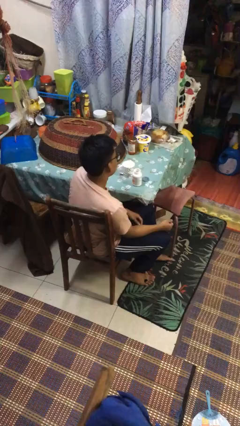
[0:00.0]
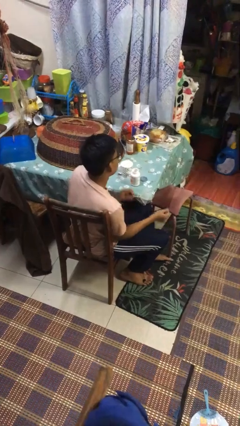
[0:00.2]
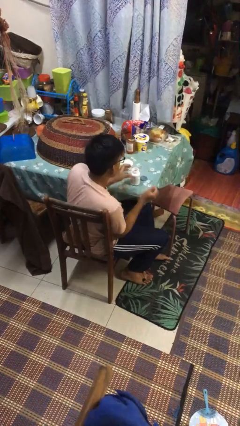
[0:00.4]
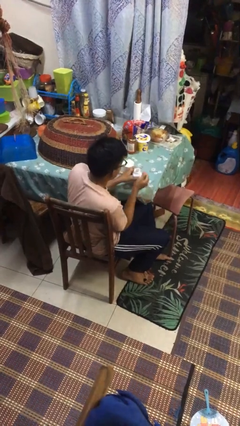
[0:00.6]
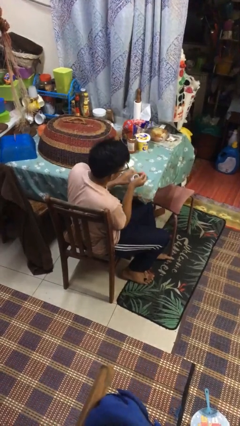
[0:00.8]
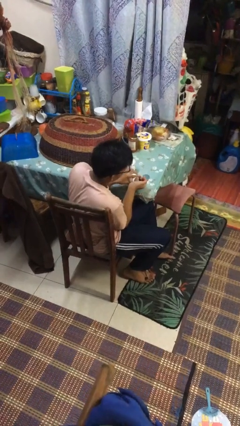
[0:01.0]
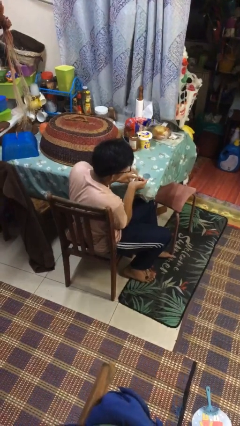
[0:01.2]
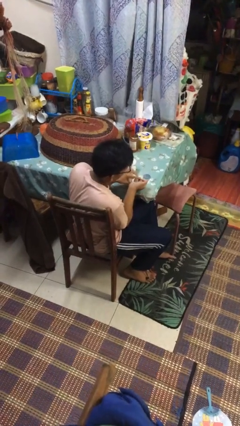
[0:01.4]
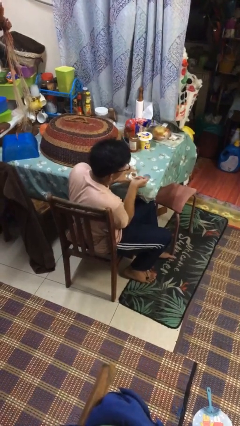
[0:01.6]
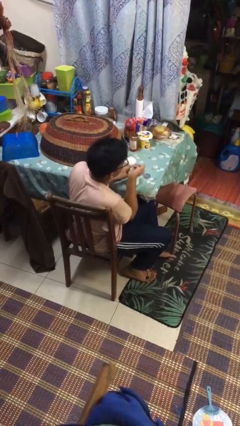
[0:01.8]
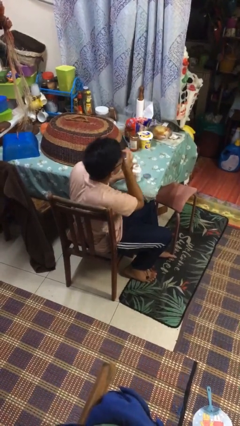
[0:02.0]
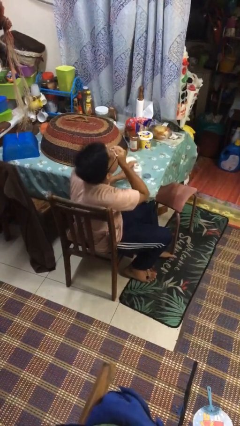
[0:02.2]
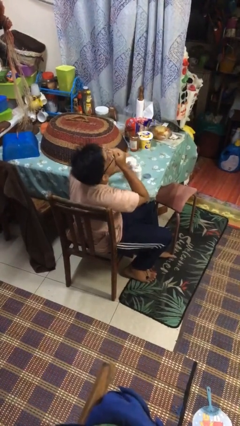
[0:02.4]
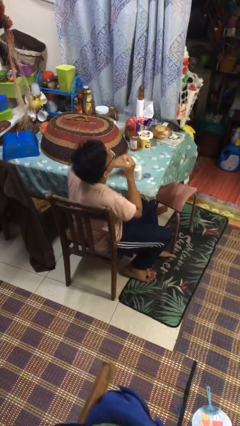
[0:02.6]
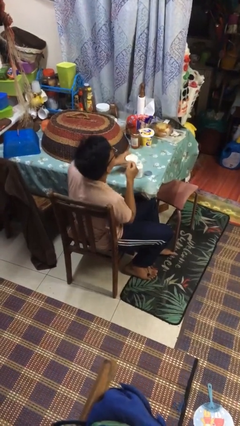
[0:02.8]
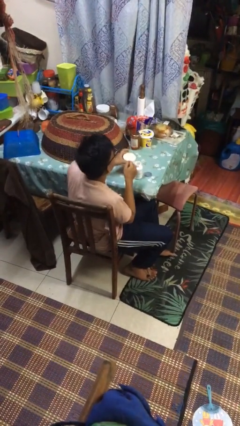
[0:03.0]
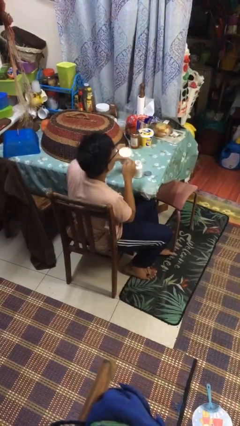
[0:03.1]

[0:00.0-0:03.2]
person takes medicine pills

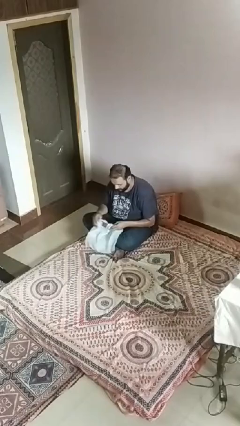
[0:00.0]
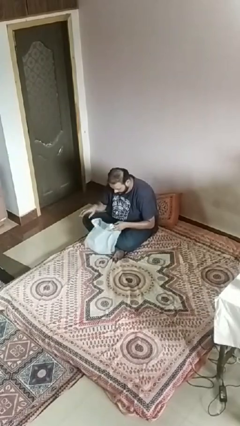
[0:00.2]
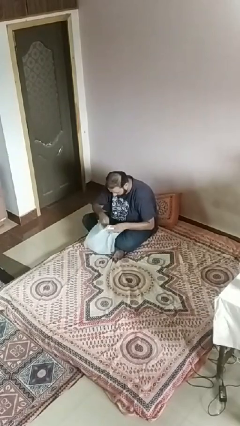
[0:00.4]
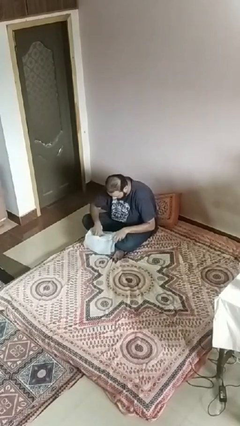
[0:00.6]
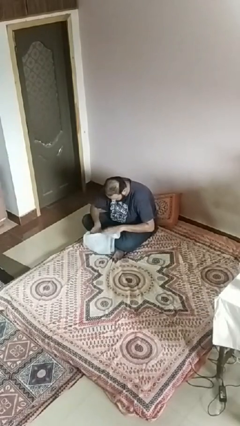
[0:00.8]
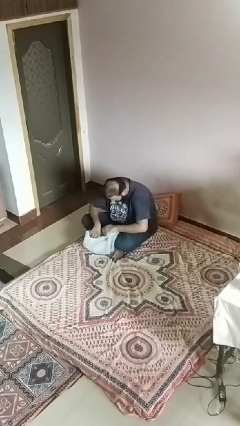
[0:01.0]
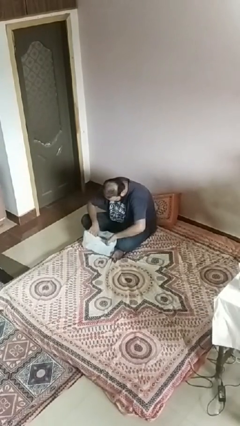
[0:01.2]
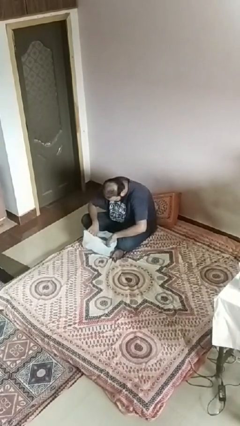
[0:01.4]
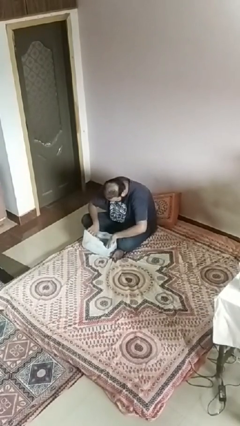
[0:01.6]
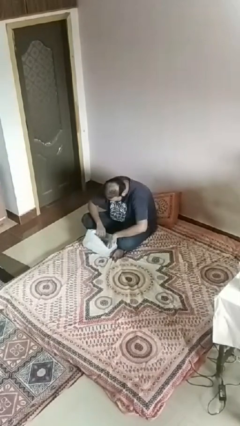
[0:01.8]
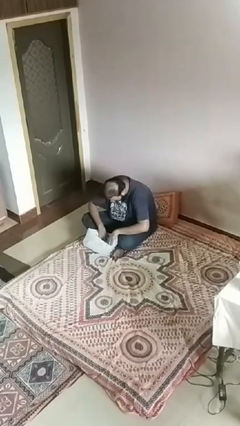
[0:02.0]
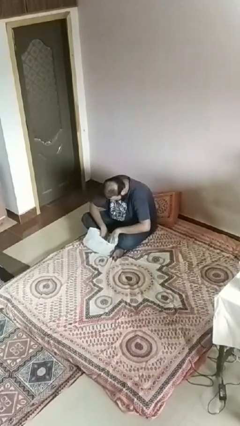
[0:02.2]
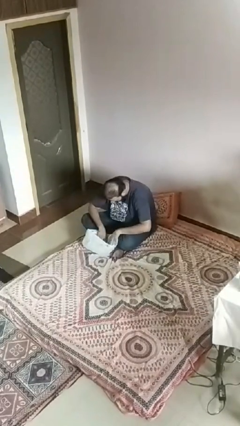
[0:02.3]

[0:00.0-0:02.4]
person searches in bag

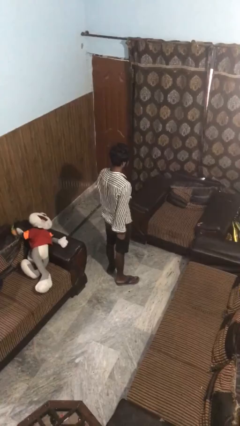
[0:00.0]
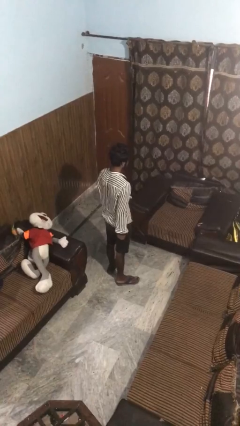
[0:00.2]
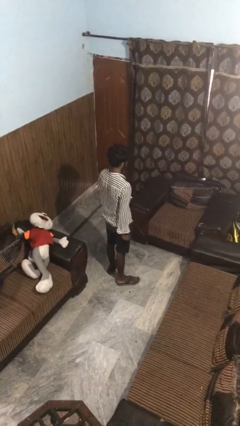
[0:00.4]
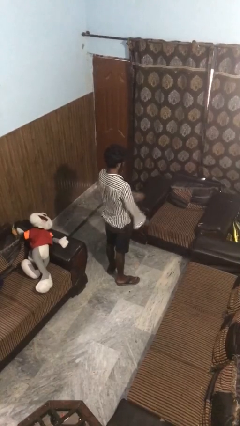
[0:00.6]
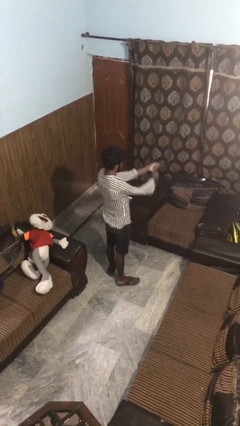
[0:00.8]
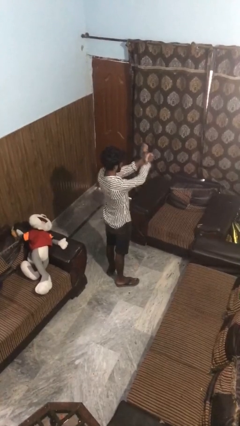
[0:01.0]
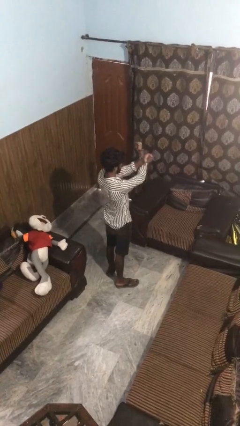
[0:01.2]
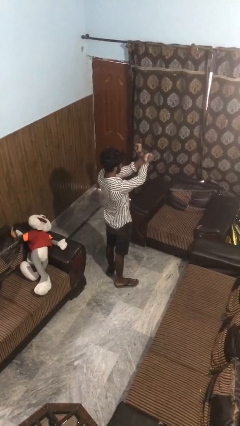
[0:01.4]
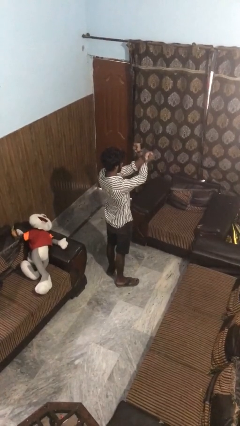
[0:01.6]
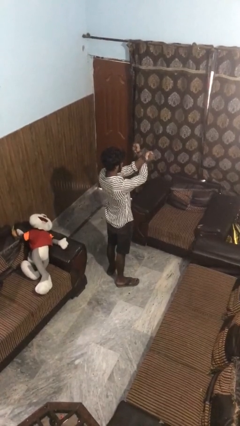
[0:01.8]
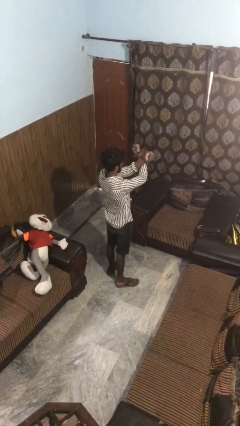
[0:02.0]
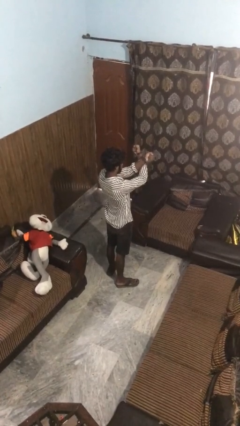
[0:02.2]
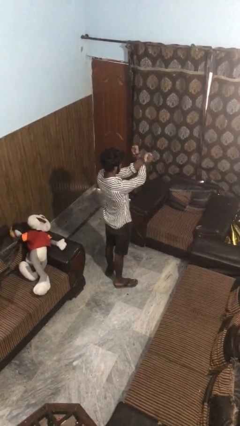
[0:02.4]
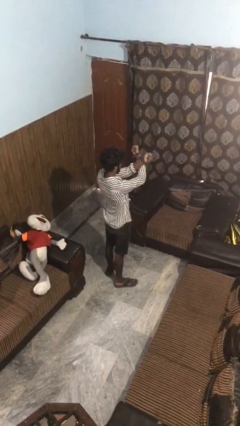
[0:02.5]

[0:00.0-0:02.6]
person gestures arms x

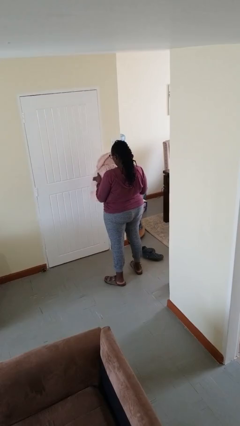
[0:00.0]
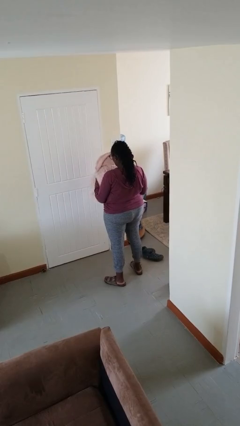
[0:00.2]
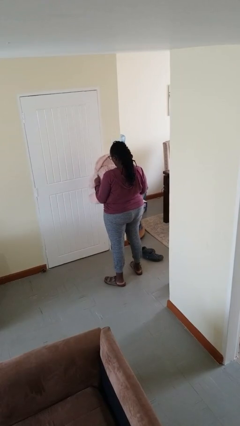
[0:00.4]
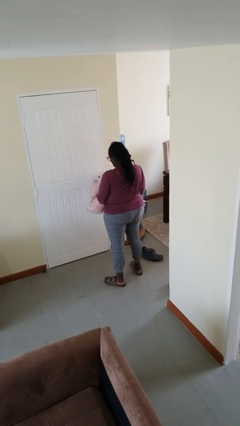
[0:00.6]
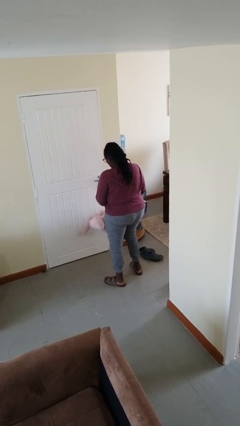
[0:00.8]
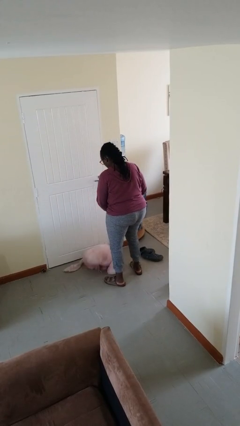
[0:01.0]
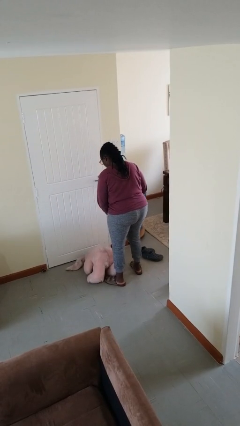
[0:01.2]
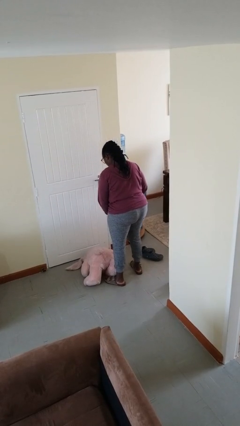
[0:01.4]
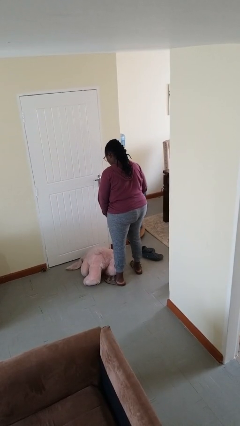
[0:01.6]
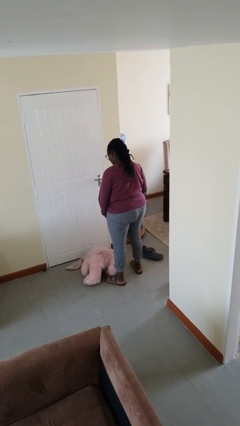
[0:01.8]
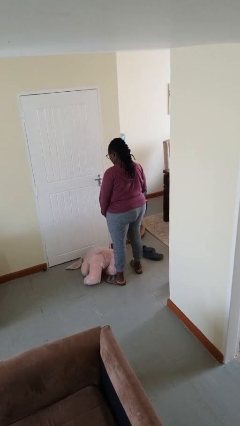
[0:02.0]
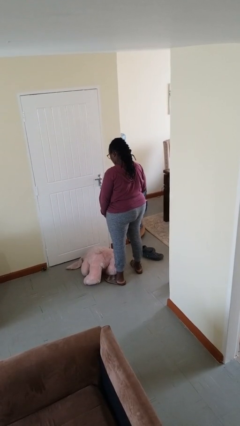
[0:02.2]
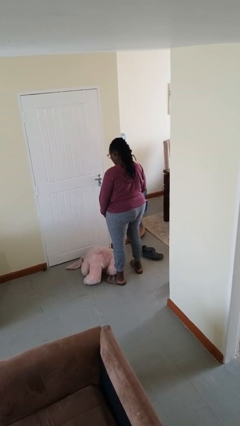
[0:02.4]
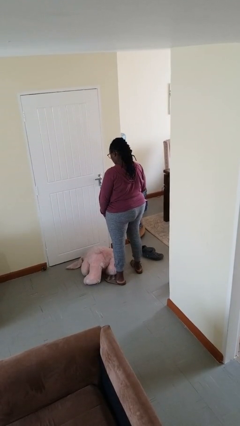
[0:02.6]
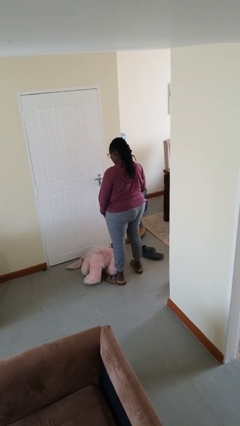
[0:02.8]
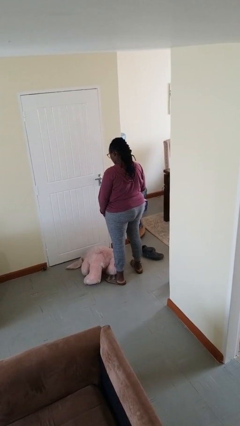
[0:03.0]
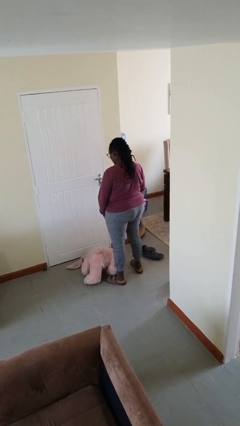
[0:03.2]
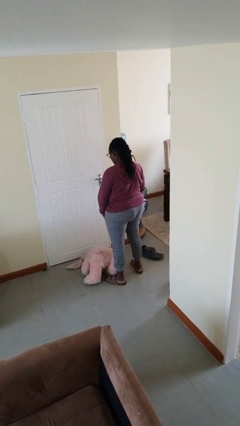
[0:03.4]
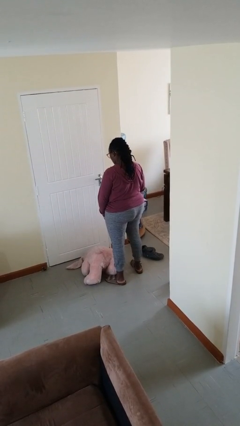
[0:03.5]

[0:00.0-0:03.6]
person drops object

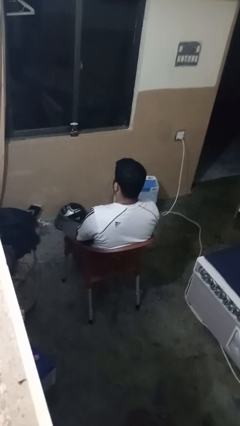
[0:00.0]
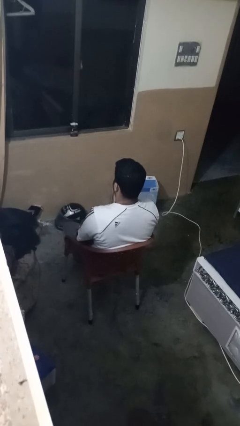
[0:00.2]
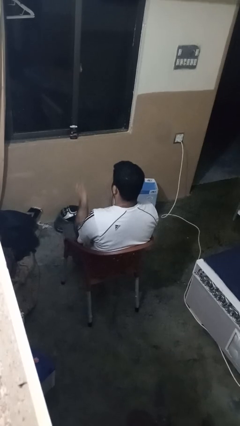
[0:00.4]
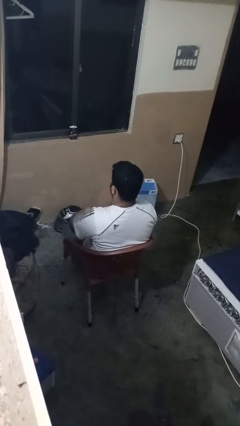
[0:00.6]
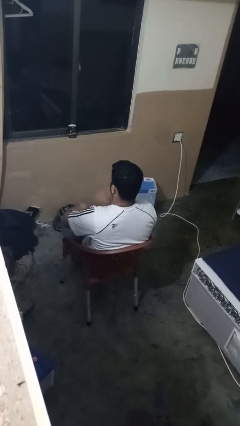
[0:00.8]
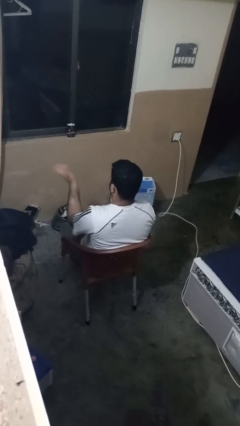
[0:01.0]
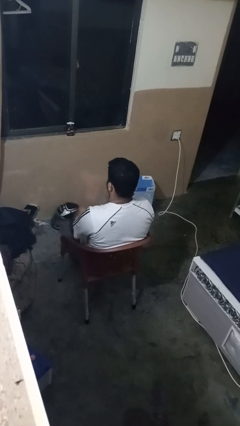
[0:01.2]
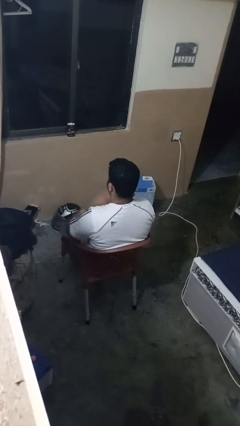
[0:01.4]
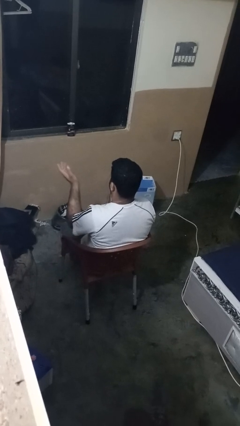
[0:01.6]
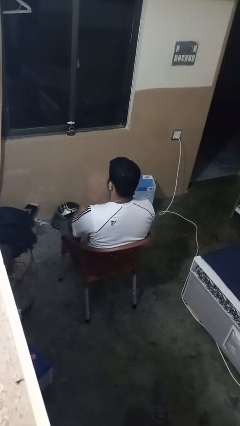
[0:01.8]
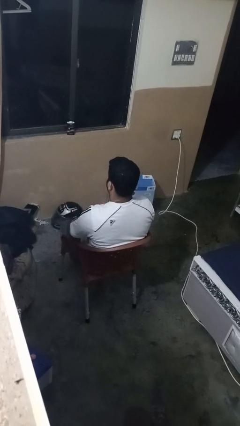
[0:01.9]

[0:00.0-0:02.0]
person drums on chest

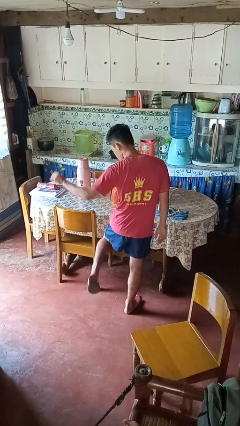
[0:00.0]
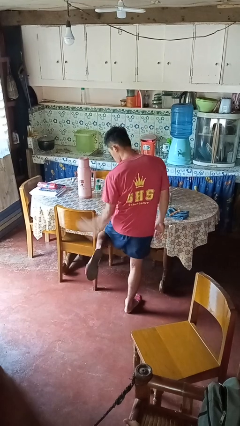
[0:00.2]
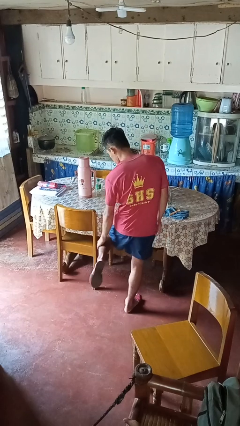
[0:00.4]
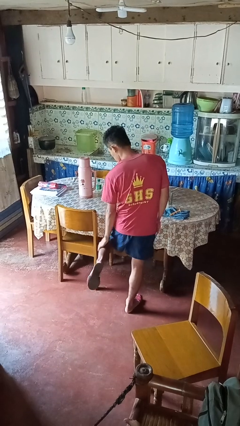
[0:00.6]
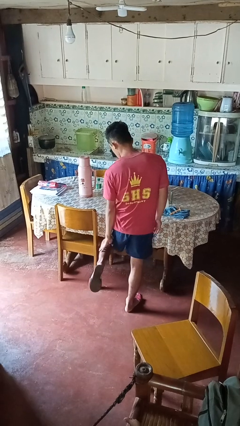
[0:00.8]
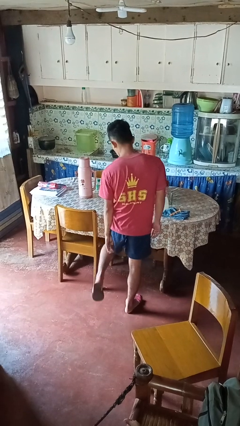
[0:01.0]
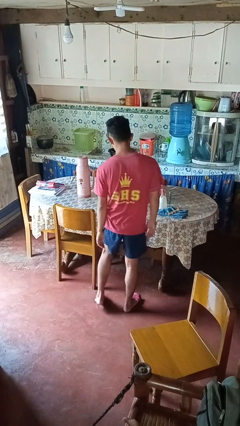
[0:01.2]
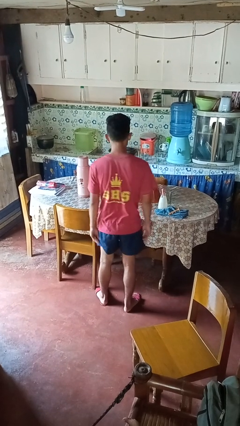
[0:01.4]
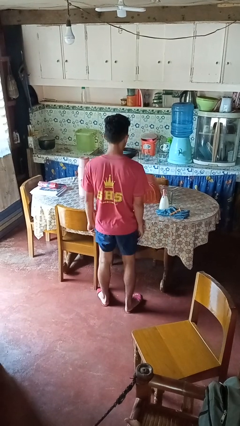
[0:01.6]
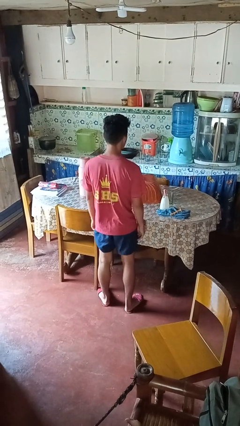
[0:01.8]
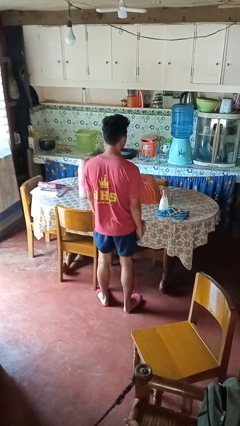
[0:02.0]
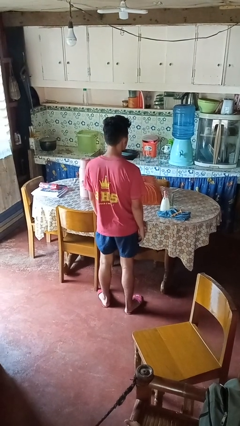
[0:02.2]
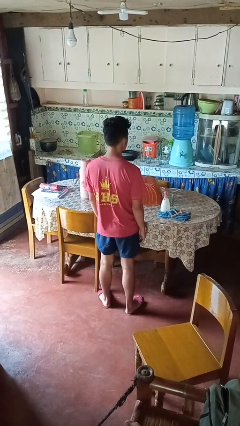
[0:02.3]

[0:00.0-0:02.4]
person swats bug

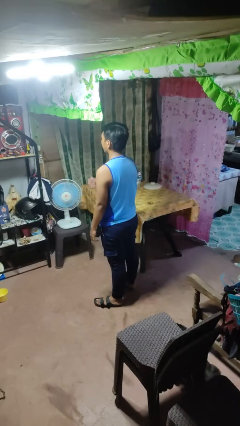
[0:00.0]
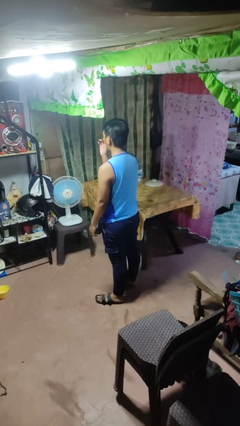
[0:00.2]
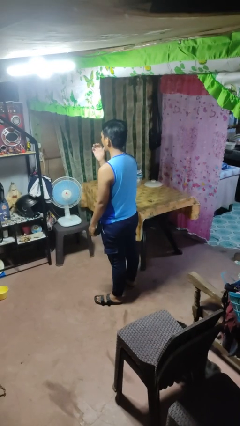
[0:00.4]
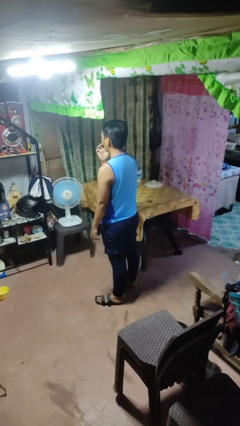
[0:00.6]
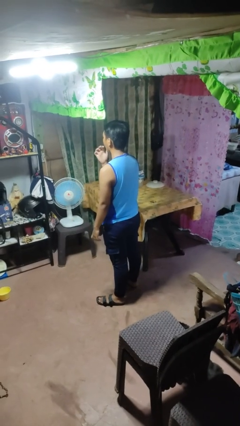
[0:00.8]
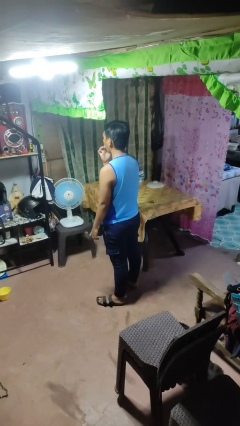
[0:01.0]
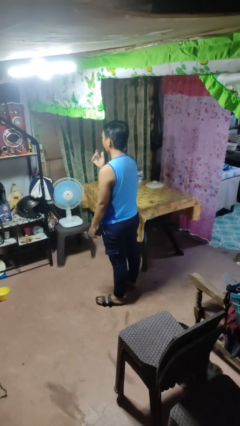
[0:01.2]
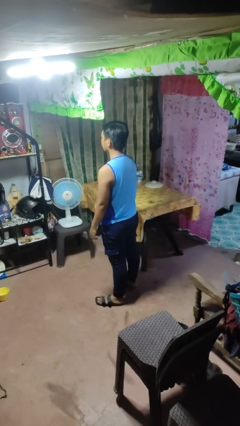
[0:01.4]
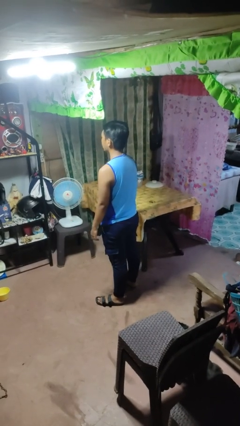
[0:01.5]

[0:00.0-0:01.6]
person licks fingers
